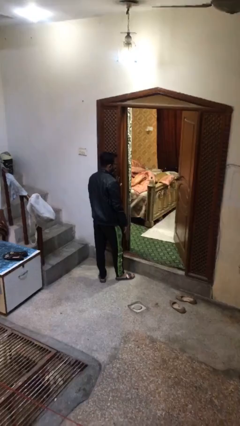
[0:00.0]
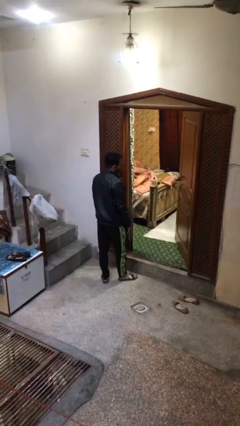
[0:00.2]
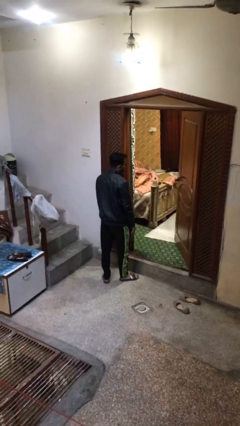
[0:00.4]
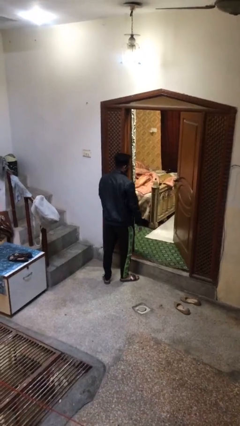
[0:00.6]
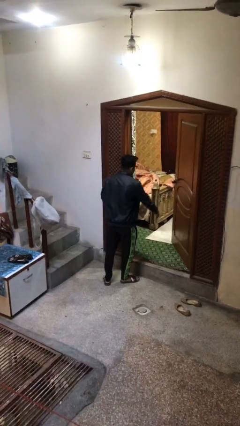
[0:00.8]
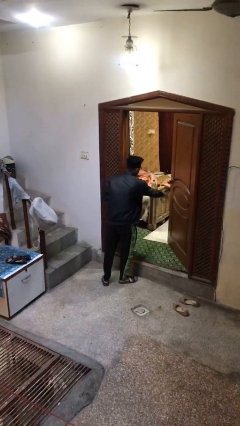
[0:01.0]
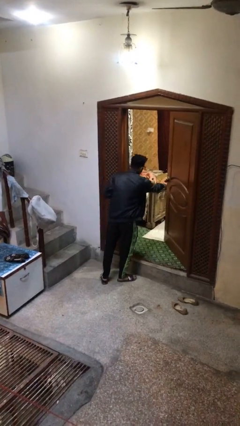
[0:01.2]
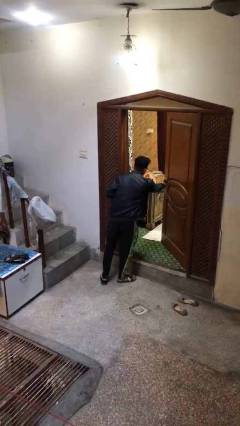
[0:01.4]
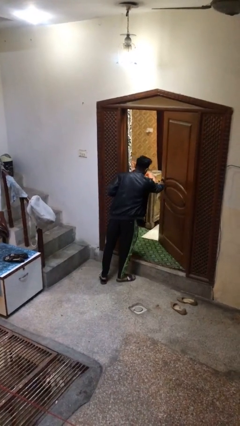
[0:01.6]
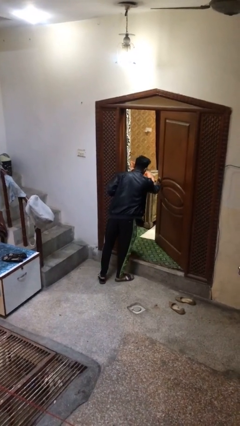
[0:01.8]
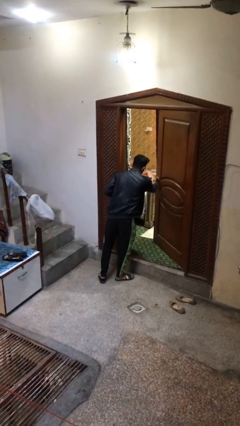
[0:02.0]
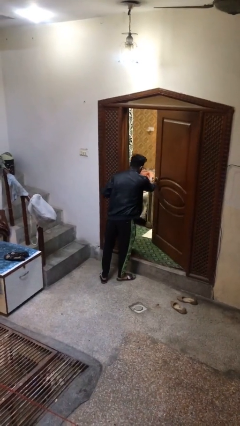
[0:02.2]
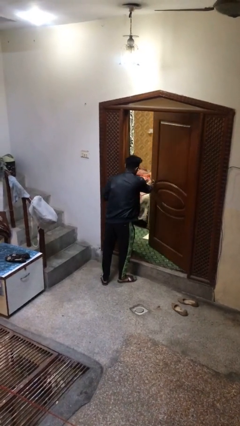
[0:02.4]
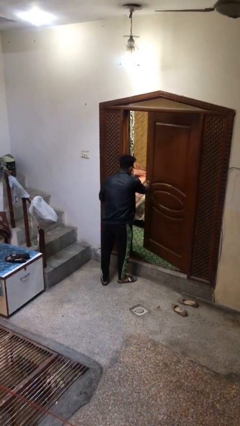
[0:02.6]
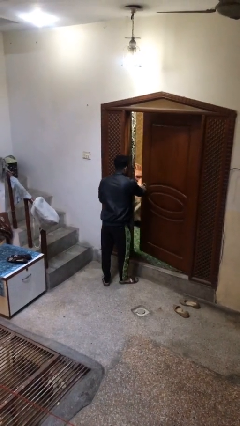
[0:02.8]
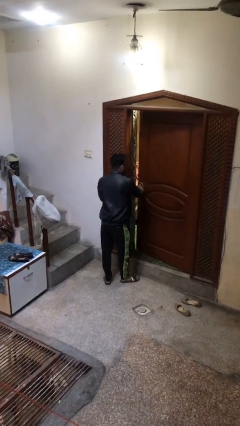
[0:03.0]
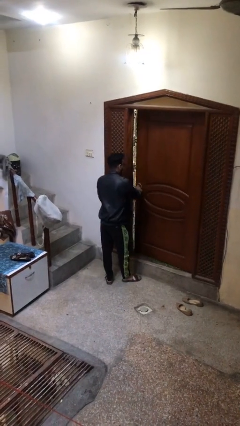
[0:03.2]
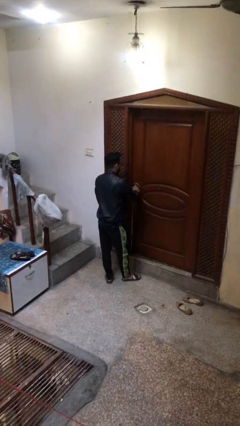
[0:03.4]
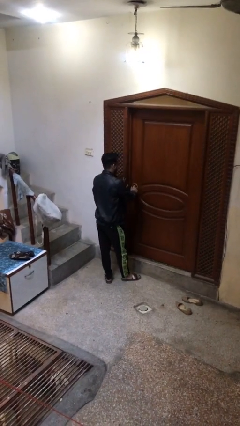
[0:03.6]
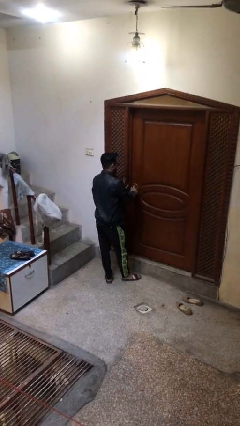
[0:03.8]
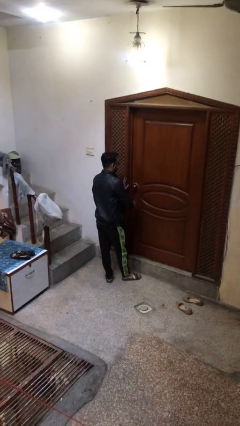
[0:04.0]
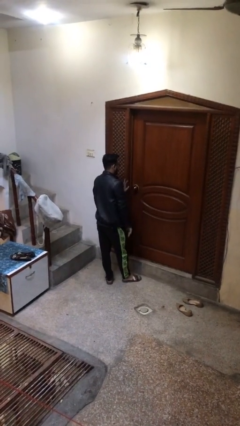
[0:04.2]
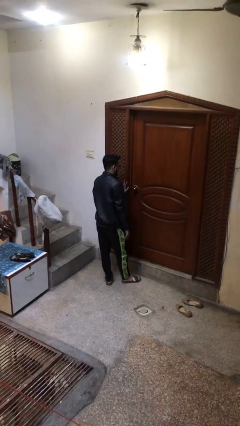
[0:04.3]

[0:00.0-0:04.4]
person closes facility door

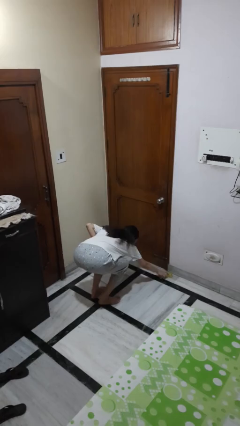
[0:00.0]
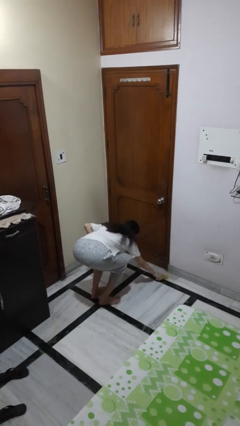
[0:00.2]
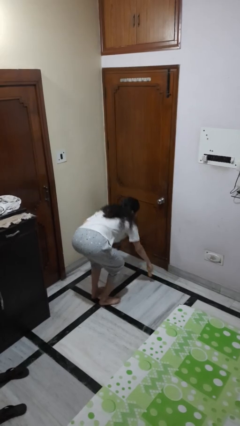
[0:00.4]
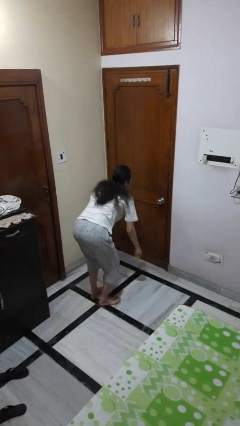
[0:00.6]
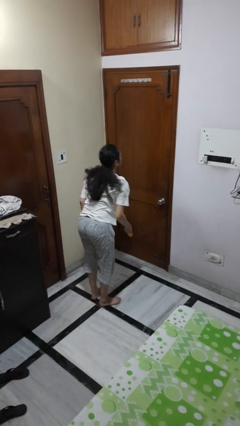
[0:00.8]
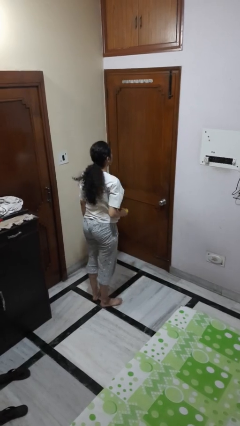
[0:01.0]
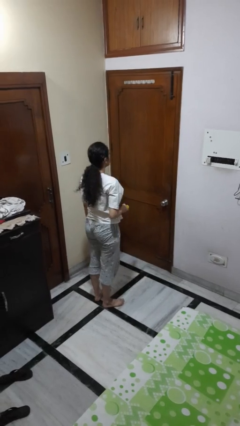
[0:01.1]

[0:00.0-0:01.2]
person picks up object from floor

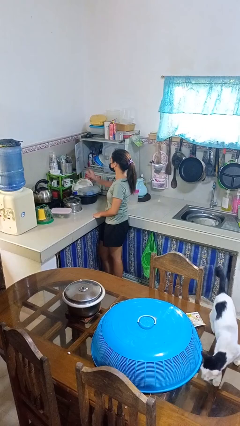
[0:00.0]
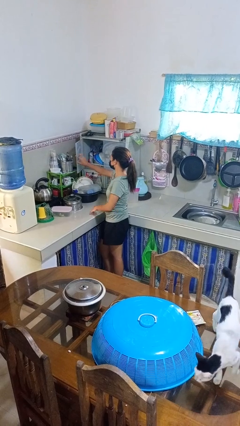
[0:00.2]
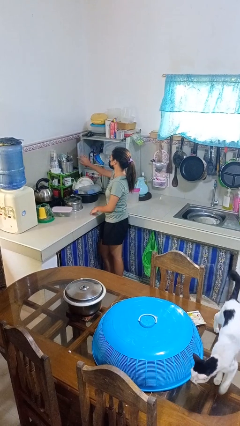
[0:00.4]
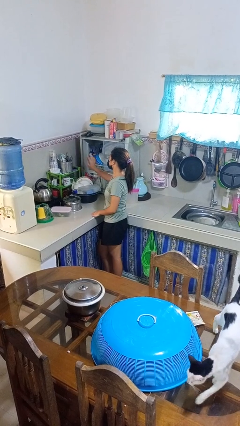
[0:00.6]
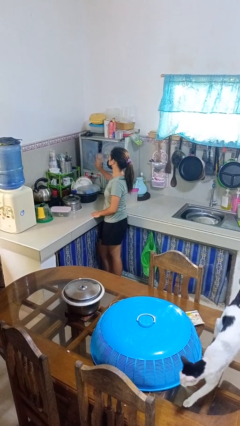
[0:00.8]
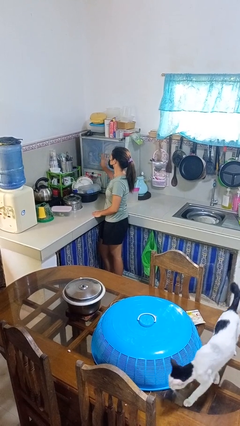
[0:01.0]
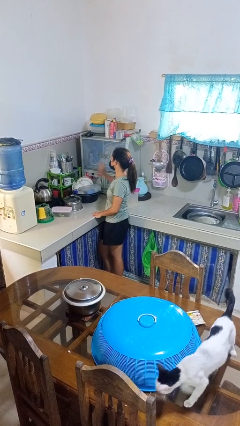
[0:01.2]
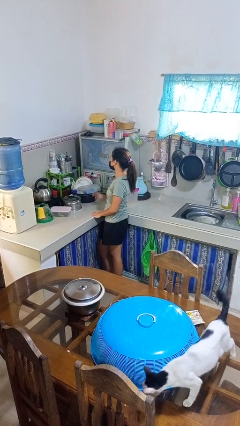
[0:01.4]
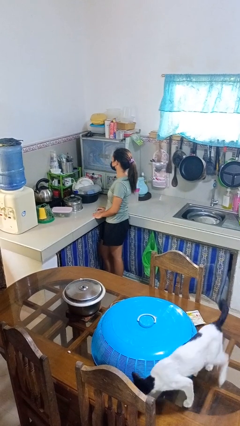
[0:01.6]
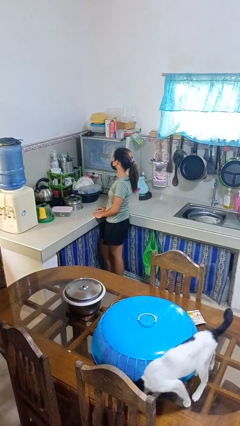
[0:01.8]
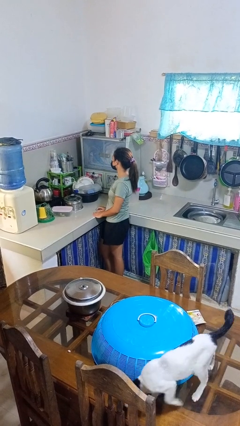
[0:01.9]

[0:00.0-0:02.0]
person closes kitchen drawer

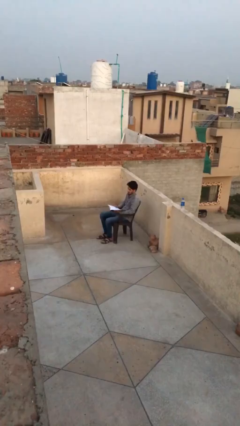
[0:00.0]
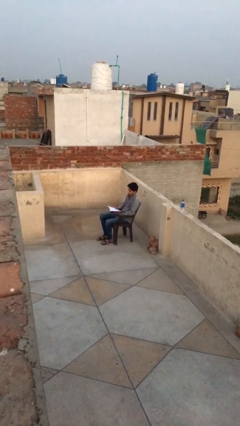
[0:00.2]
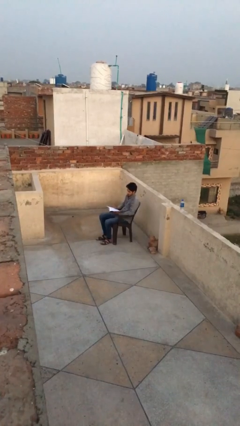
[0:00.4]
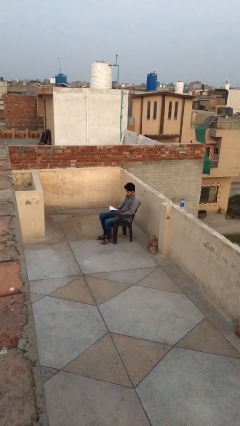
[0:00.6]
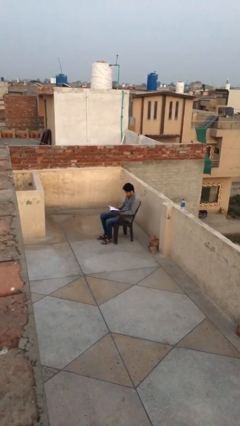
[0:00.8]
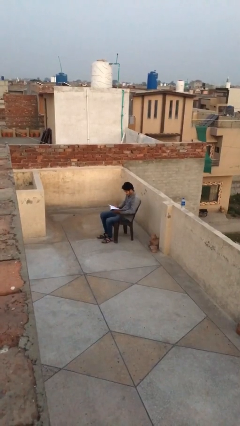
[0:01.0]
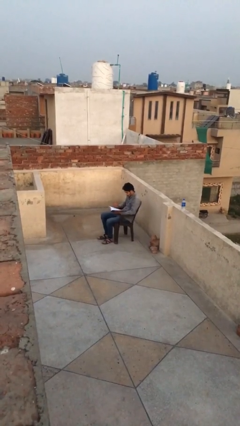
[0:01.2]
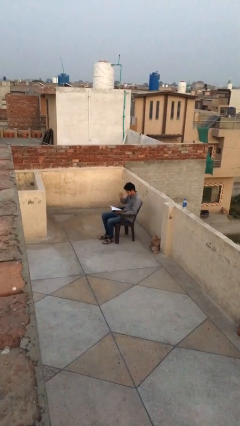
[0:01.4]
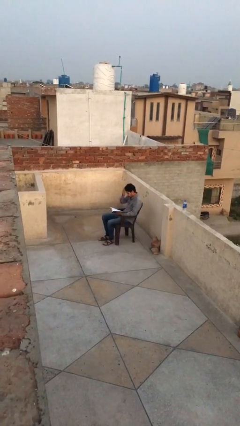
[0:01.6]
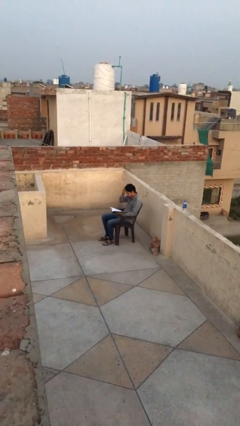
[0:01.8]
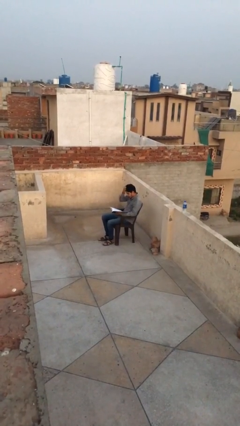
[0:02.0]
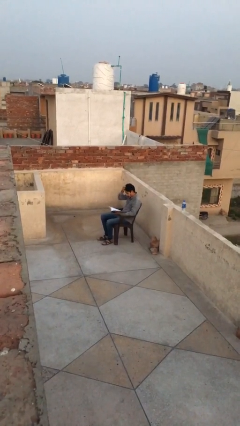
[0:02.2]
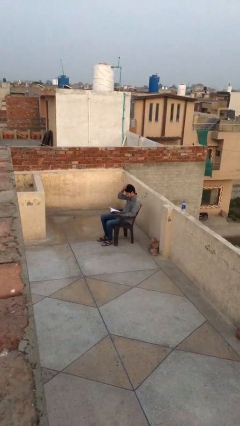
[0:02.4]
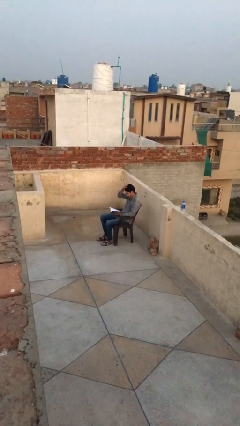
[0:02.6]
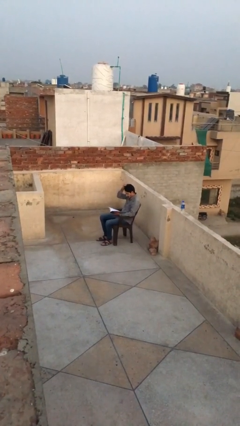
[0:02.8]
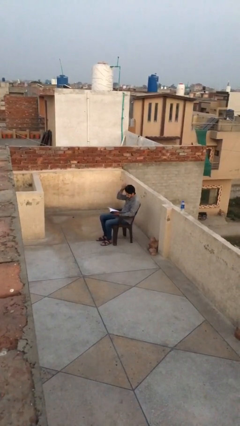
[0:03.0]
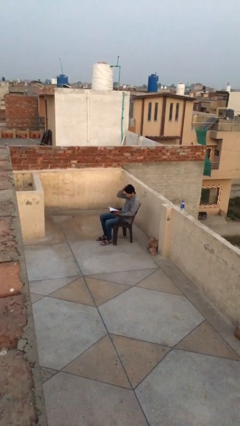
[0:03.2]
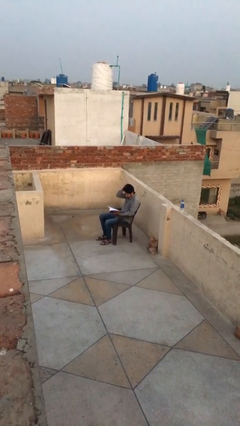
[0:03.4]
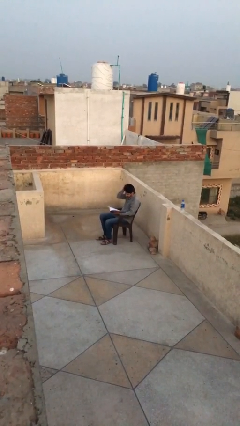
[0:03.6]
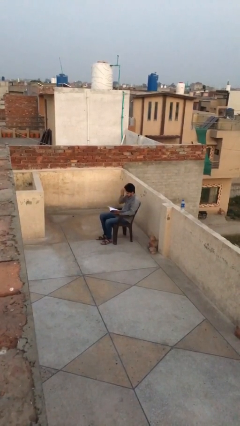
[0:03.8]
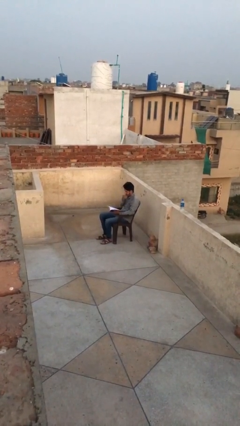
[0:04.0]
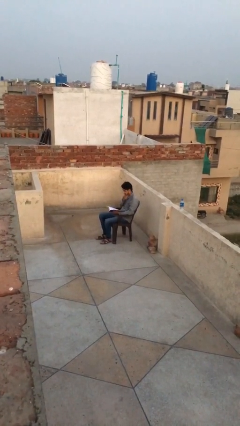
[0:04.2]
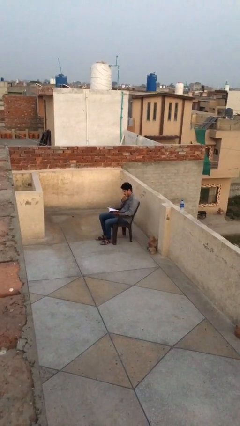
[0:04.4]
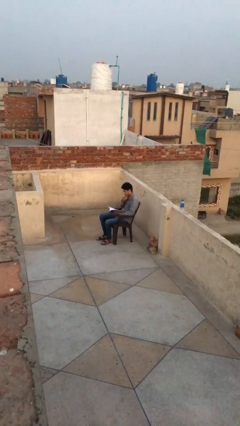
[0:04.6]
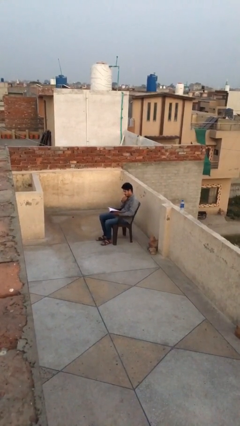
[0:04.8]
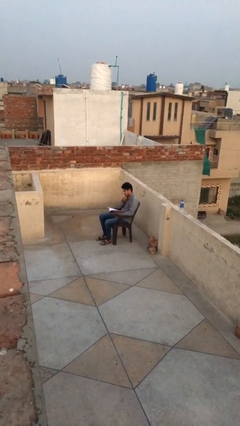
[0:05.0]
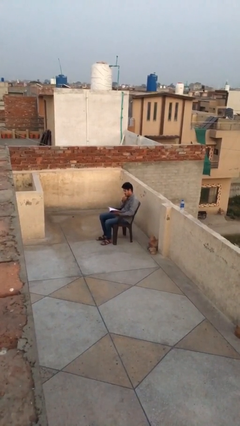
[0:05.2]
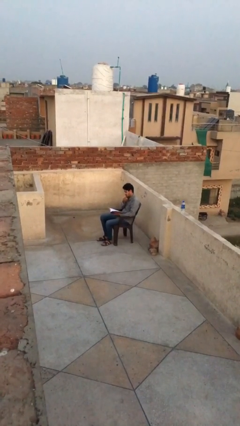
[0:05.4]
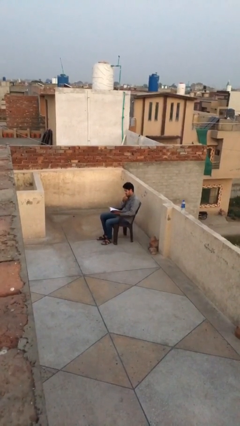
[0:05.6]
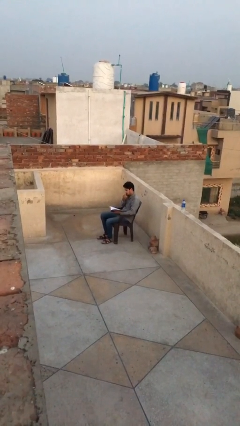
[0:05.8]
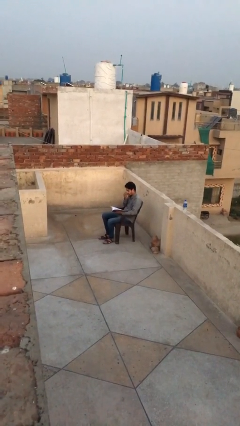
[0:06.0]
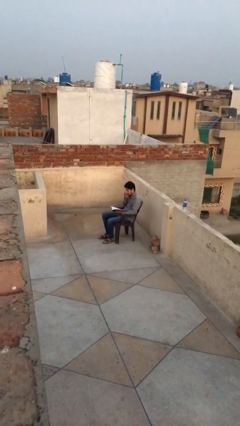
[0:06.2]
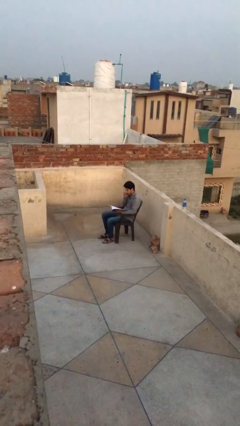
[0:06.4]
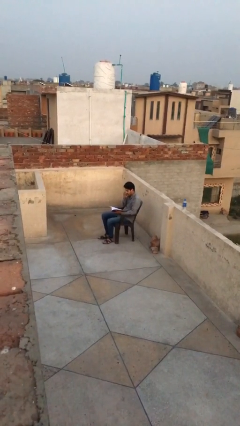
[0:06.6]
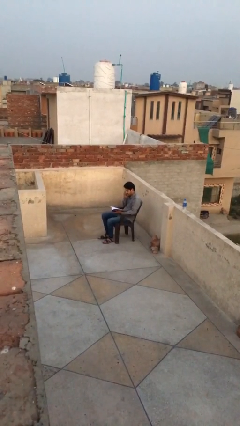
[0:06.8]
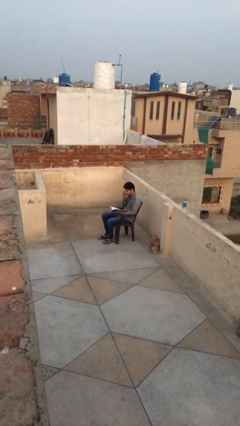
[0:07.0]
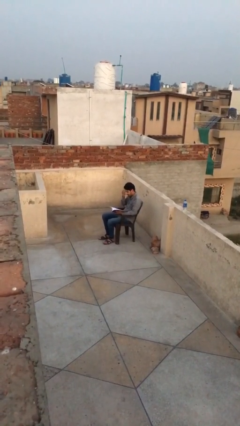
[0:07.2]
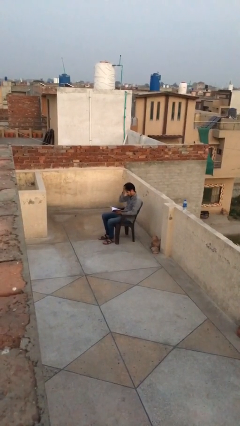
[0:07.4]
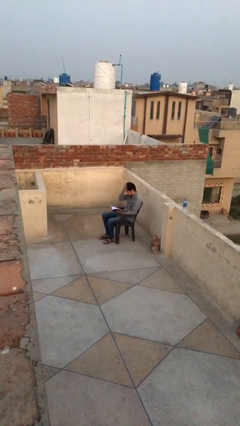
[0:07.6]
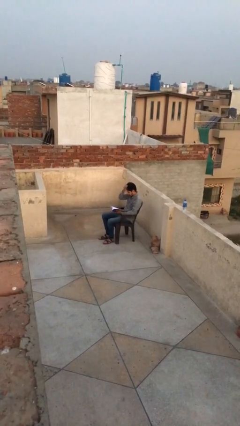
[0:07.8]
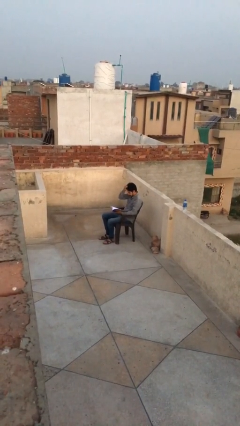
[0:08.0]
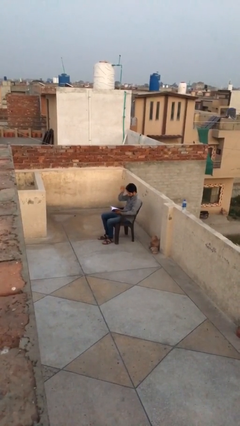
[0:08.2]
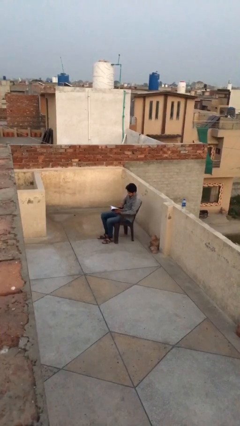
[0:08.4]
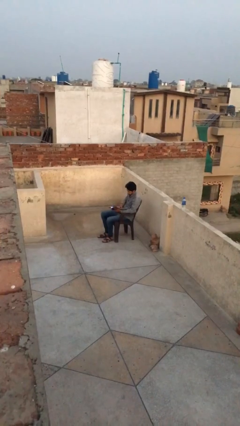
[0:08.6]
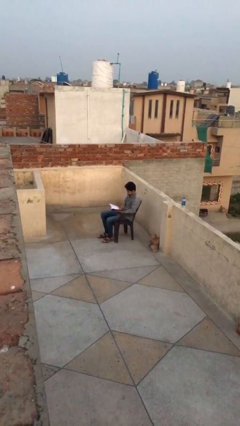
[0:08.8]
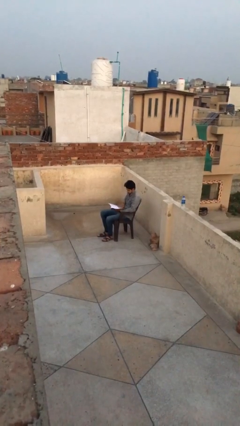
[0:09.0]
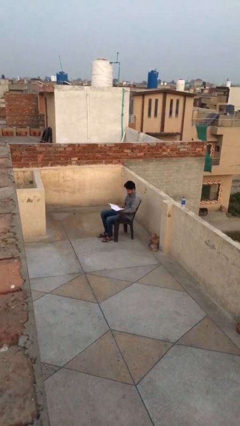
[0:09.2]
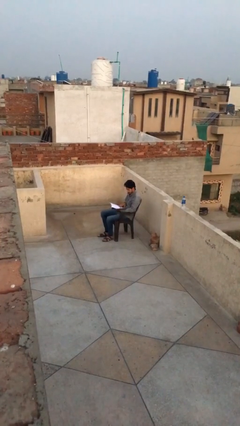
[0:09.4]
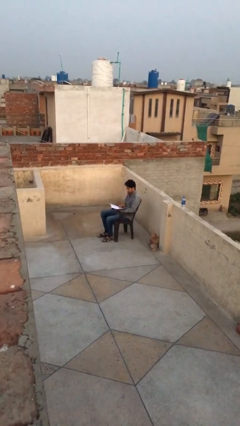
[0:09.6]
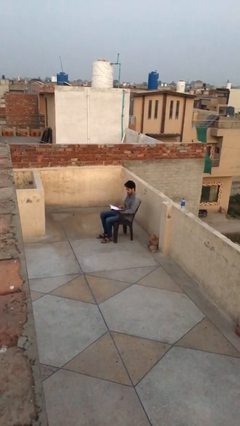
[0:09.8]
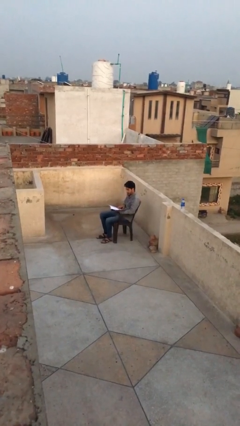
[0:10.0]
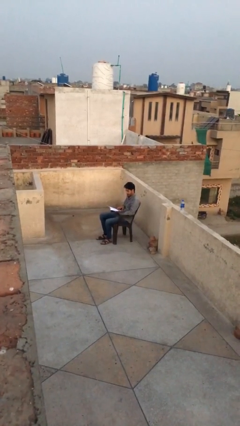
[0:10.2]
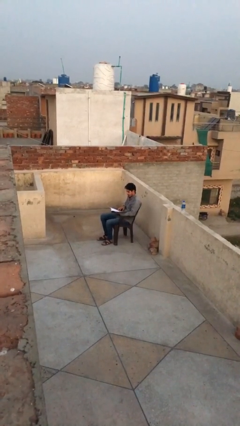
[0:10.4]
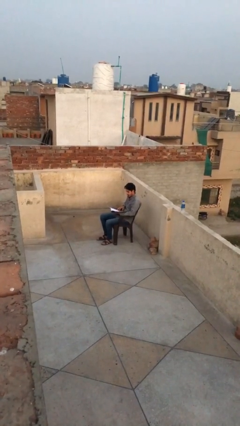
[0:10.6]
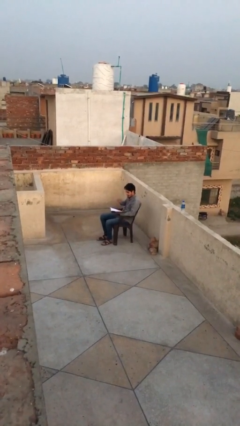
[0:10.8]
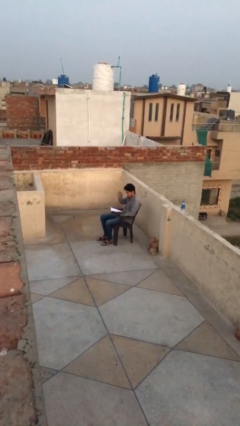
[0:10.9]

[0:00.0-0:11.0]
person reads document
